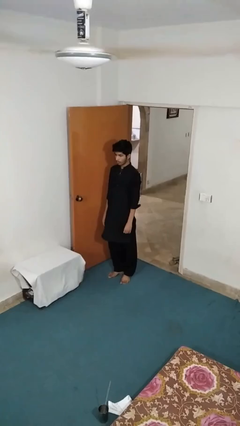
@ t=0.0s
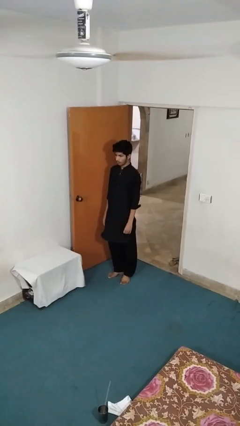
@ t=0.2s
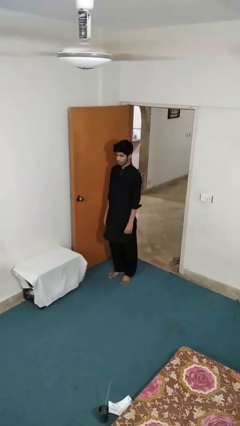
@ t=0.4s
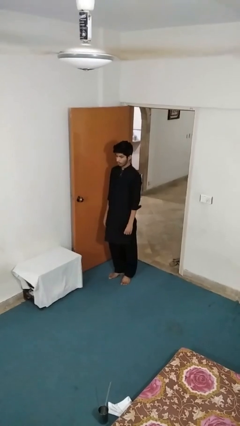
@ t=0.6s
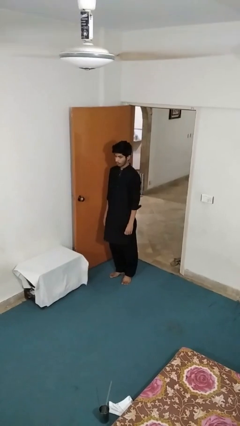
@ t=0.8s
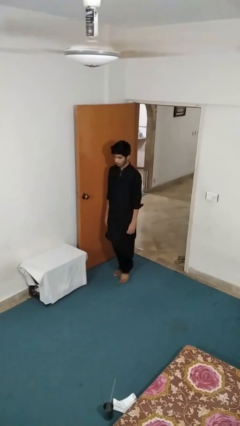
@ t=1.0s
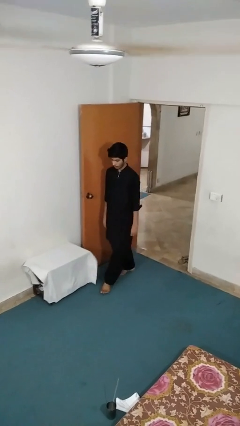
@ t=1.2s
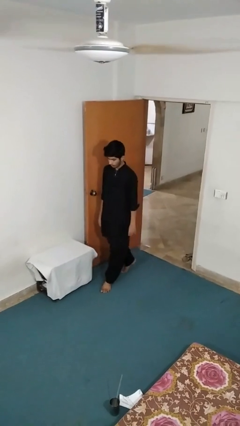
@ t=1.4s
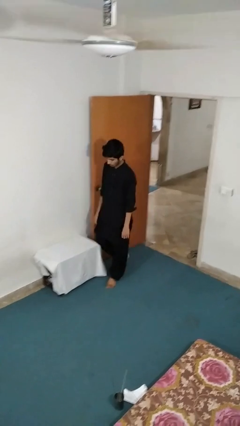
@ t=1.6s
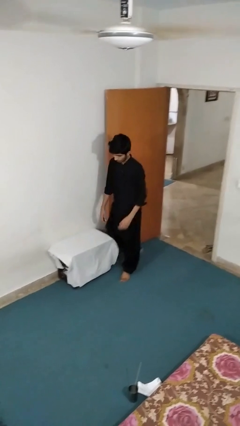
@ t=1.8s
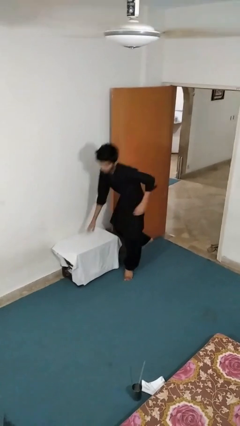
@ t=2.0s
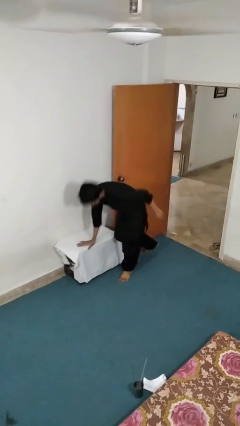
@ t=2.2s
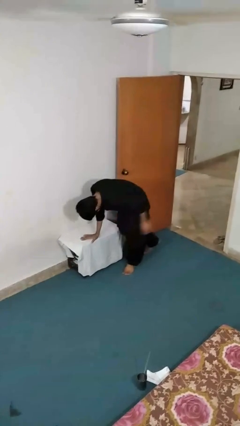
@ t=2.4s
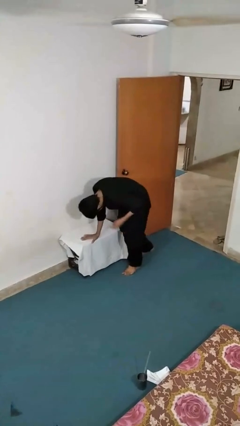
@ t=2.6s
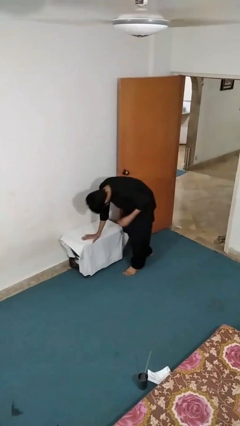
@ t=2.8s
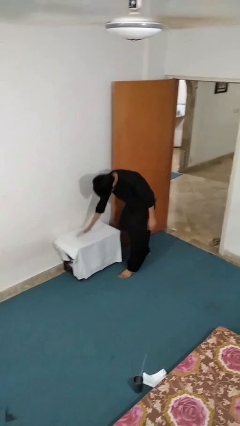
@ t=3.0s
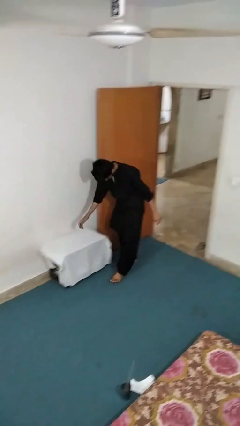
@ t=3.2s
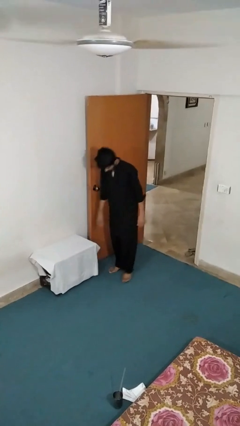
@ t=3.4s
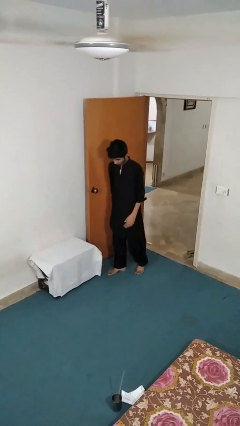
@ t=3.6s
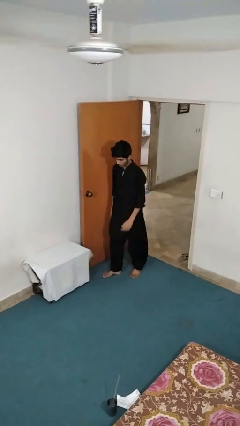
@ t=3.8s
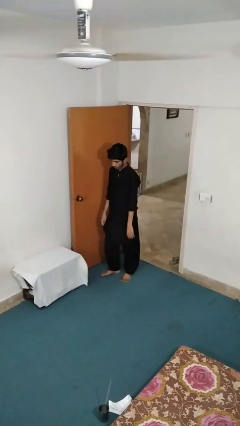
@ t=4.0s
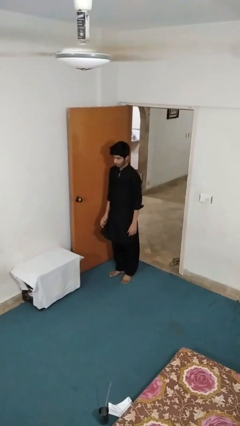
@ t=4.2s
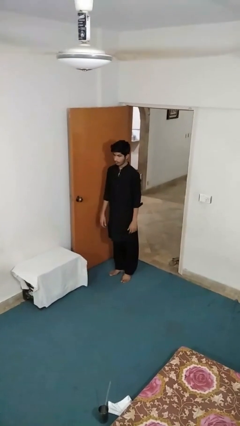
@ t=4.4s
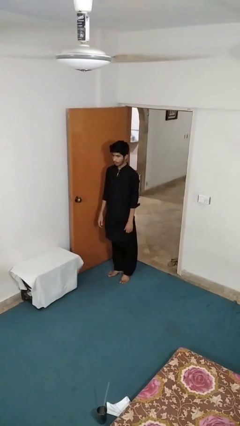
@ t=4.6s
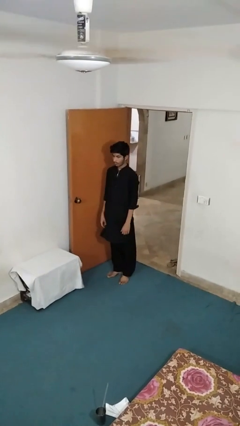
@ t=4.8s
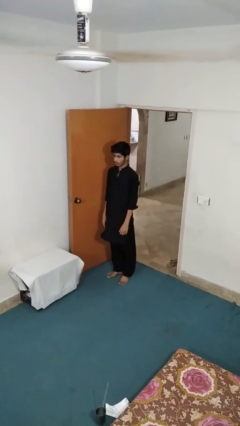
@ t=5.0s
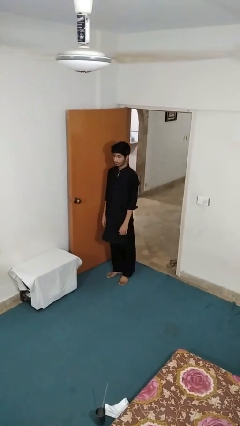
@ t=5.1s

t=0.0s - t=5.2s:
person bumps into table

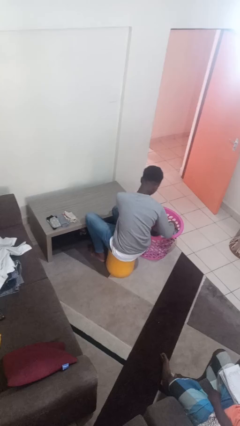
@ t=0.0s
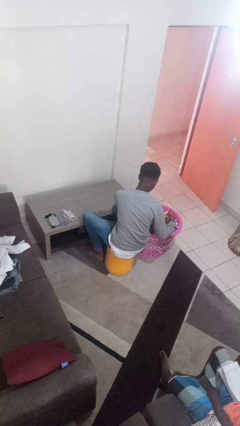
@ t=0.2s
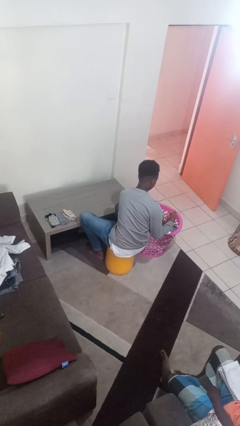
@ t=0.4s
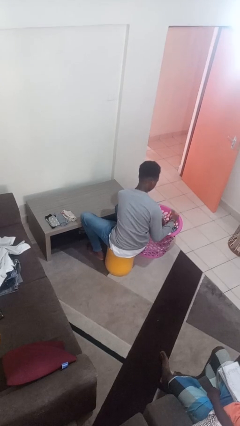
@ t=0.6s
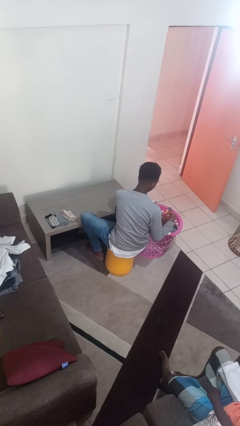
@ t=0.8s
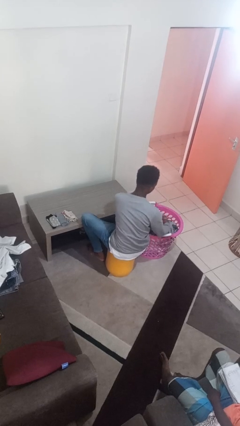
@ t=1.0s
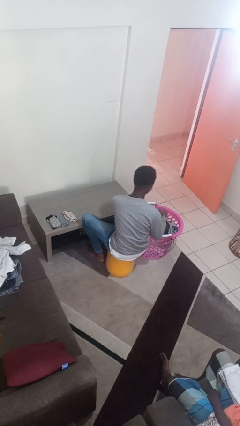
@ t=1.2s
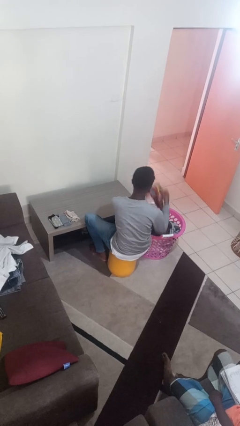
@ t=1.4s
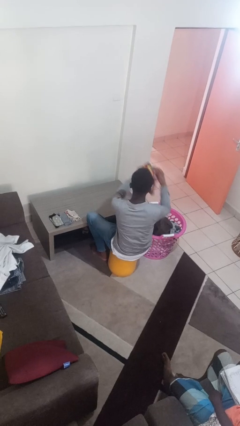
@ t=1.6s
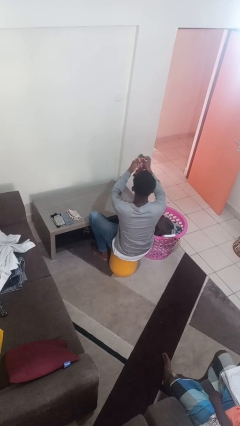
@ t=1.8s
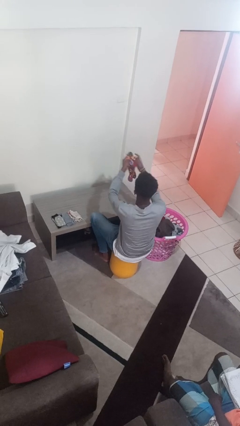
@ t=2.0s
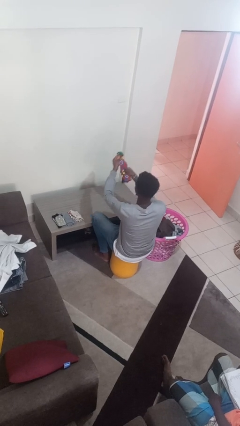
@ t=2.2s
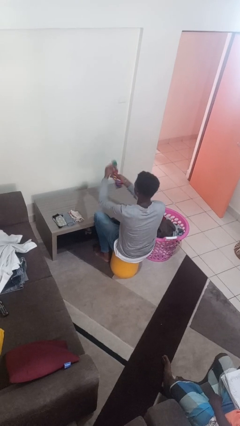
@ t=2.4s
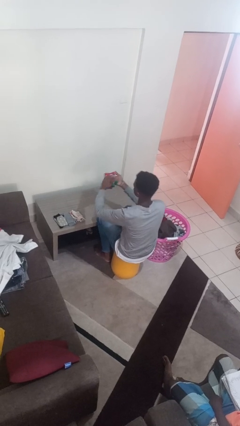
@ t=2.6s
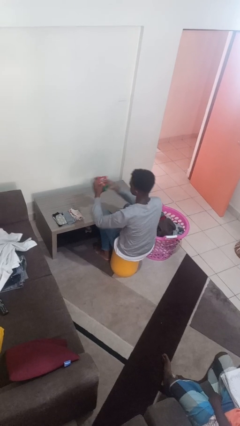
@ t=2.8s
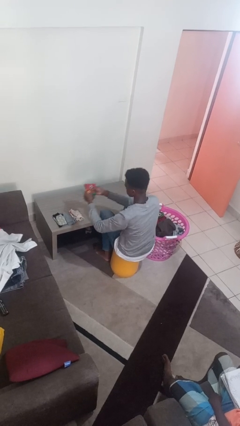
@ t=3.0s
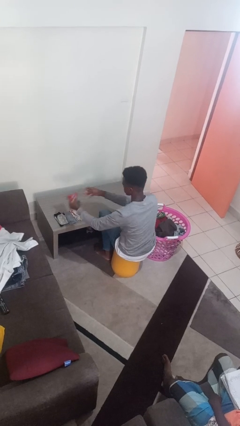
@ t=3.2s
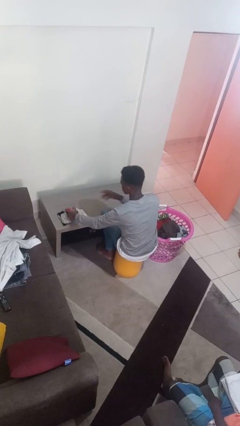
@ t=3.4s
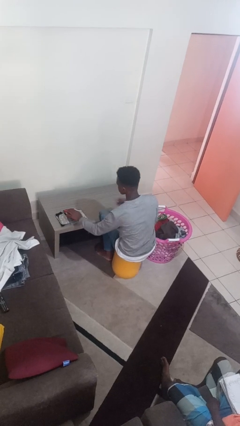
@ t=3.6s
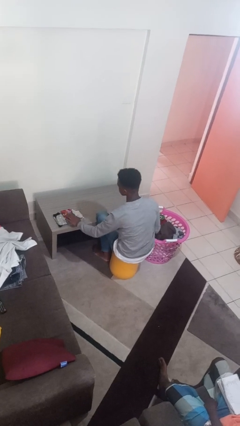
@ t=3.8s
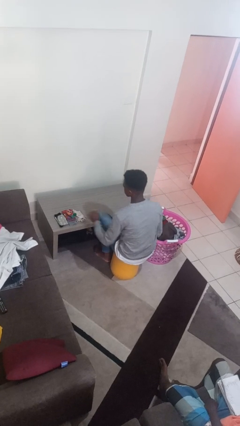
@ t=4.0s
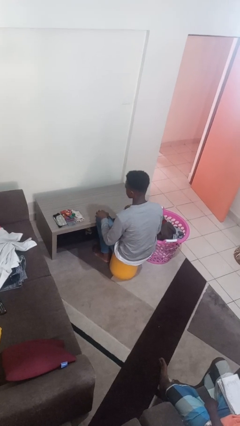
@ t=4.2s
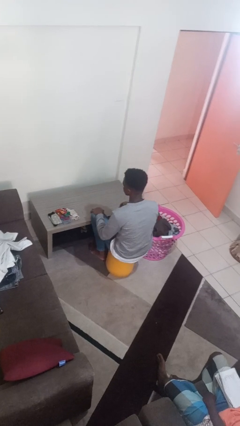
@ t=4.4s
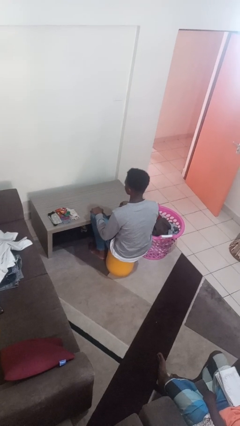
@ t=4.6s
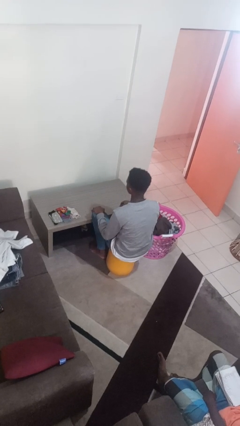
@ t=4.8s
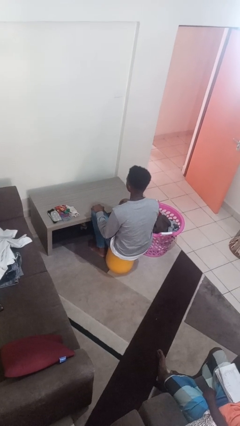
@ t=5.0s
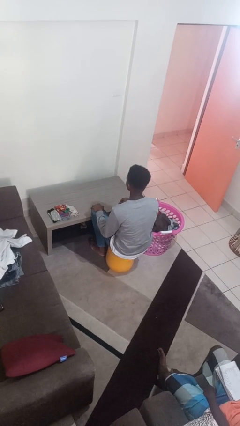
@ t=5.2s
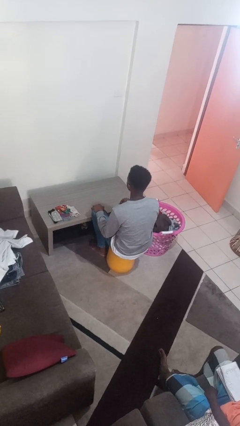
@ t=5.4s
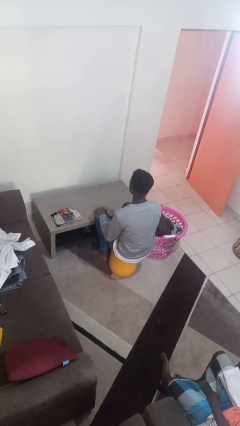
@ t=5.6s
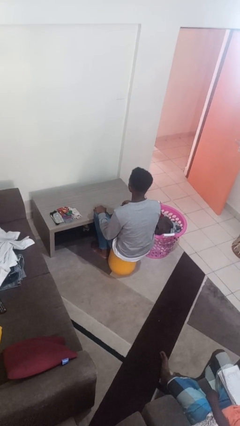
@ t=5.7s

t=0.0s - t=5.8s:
person folds socks

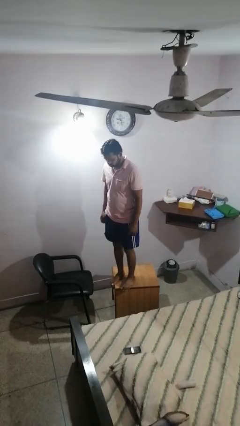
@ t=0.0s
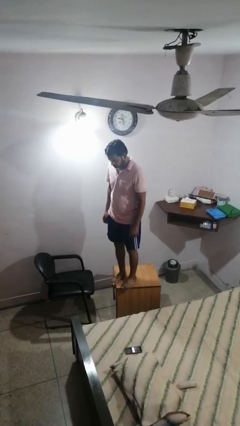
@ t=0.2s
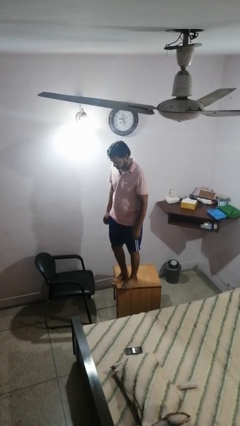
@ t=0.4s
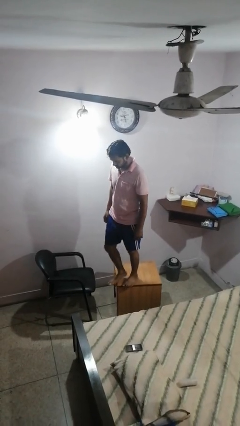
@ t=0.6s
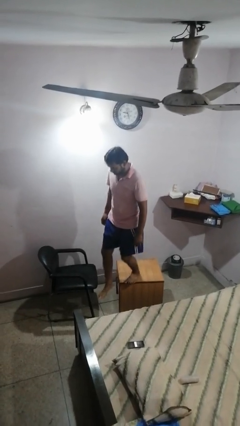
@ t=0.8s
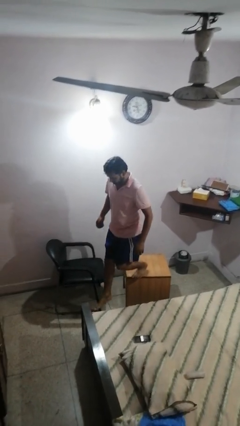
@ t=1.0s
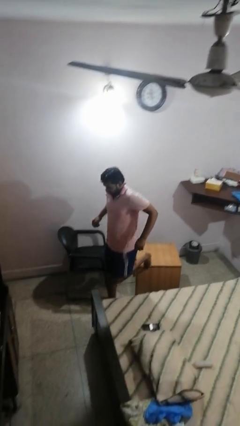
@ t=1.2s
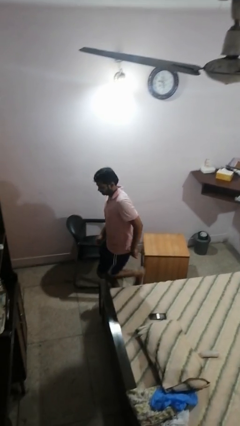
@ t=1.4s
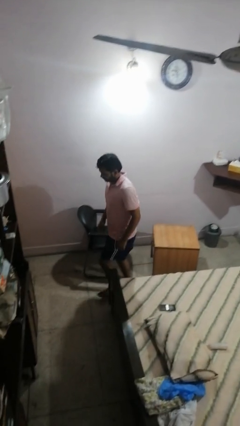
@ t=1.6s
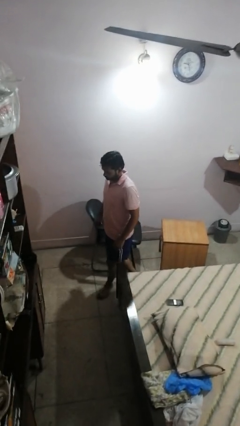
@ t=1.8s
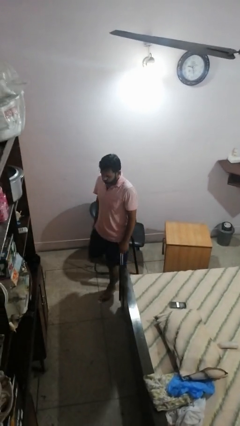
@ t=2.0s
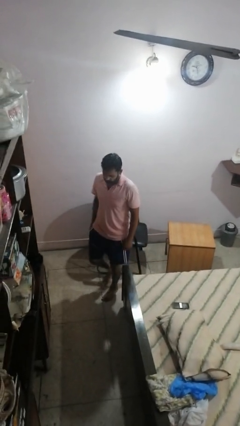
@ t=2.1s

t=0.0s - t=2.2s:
person climbs off table

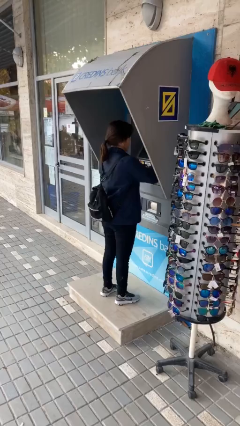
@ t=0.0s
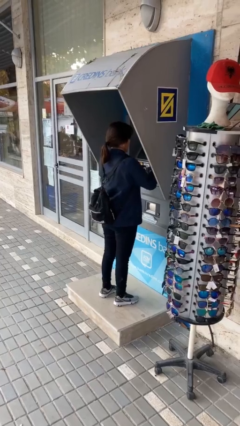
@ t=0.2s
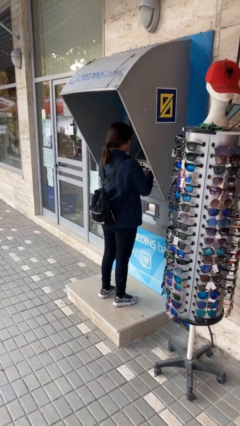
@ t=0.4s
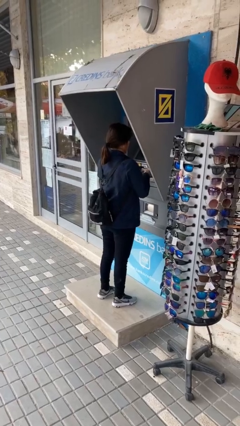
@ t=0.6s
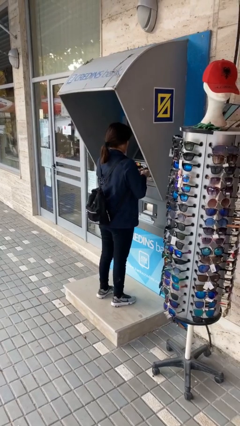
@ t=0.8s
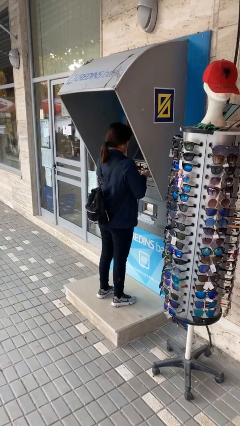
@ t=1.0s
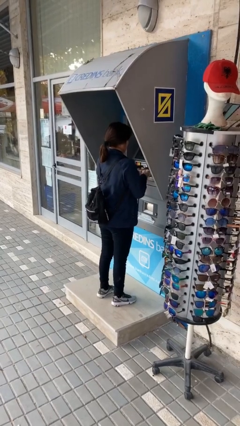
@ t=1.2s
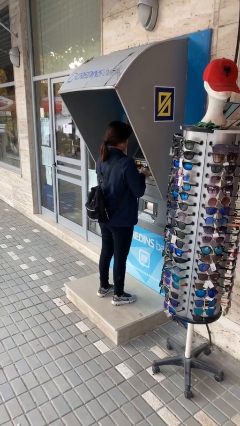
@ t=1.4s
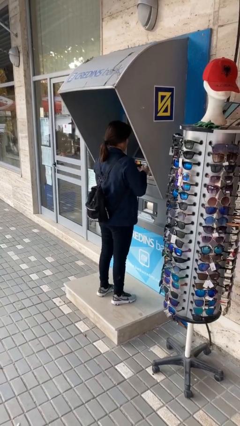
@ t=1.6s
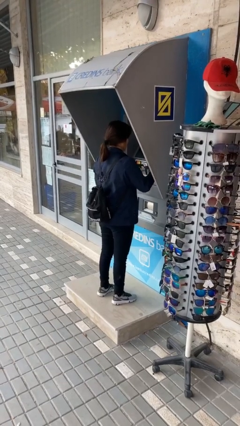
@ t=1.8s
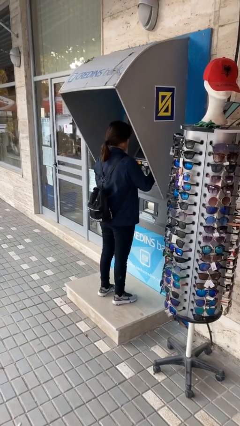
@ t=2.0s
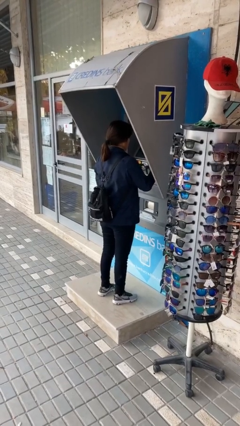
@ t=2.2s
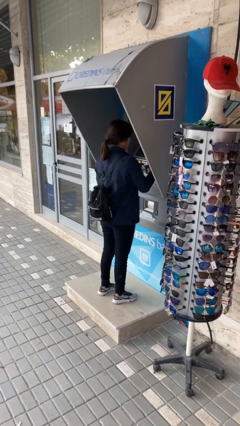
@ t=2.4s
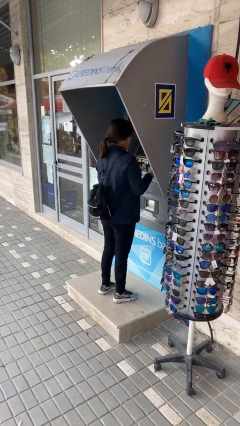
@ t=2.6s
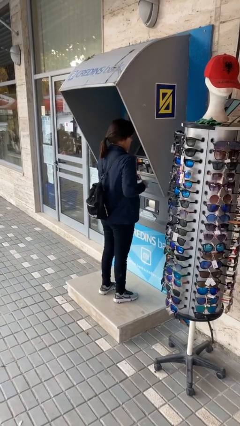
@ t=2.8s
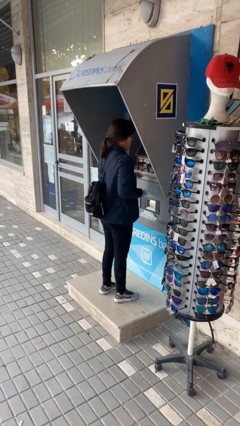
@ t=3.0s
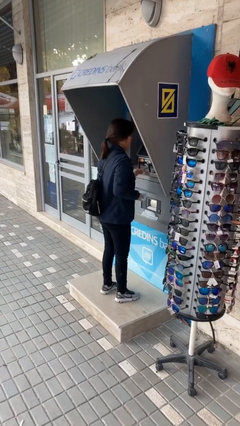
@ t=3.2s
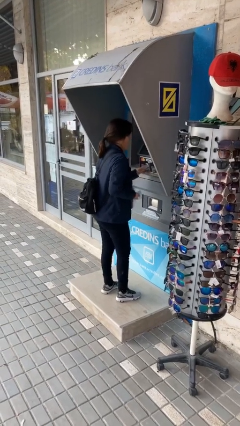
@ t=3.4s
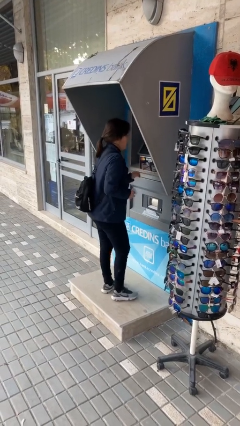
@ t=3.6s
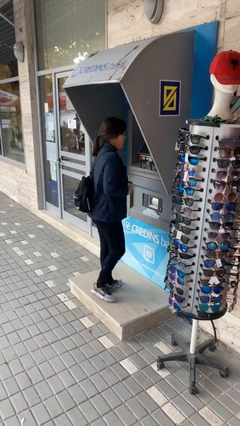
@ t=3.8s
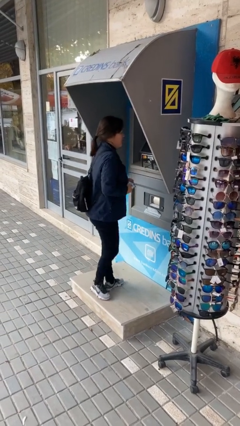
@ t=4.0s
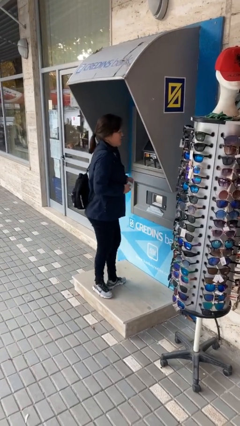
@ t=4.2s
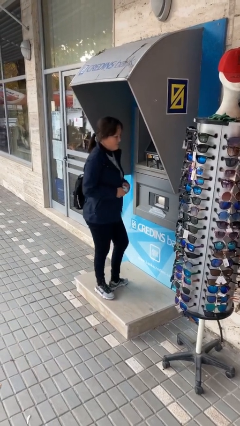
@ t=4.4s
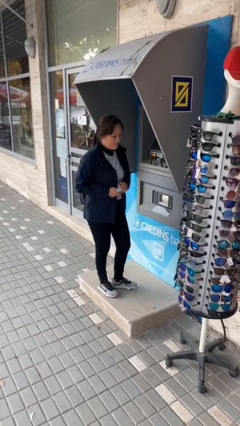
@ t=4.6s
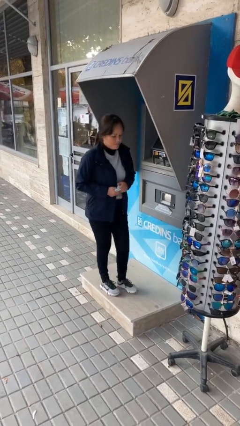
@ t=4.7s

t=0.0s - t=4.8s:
person purchases from machine

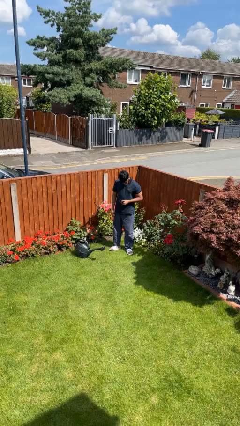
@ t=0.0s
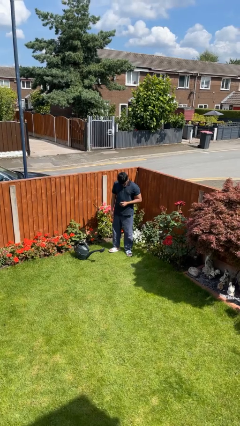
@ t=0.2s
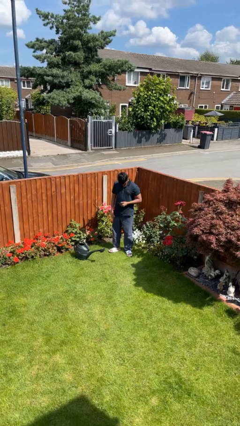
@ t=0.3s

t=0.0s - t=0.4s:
person trips on object on floor
